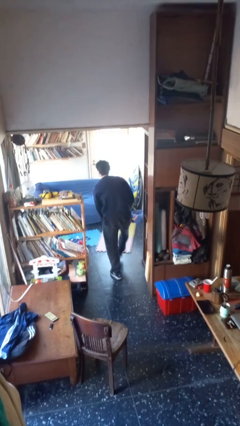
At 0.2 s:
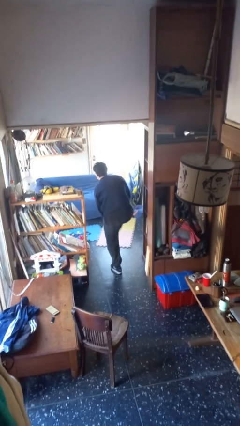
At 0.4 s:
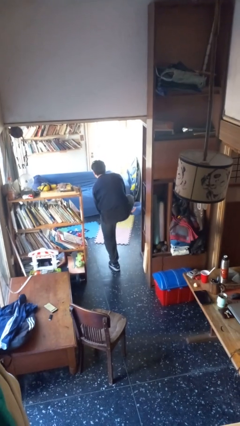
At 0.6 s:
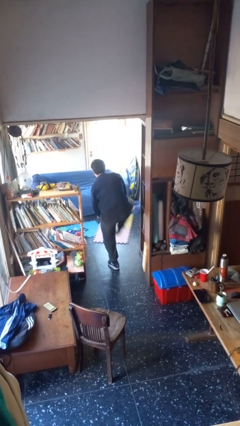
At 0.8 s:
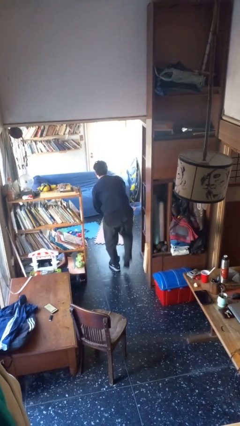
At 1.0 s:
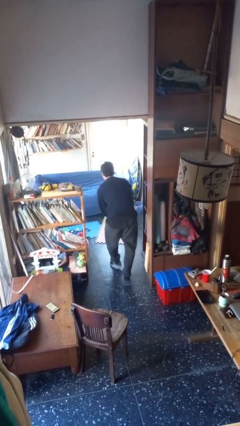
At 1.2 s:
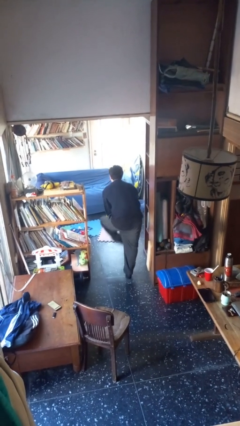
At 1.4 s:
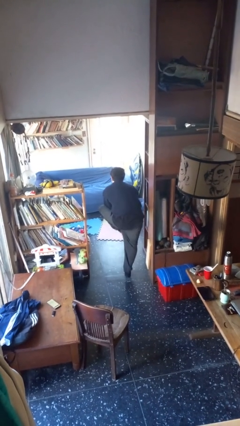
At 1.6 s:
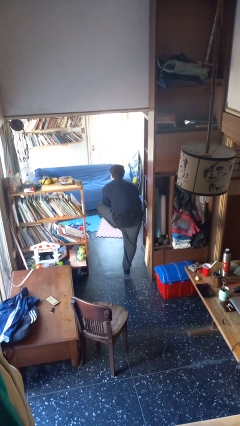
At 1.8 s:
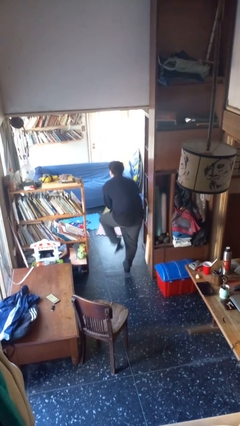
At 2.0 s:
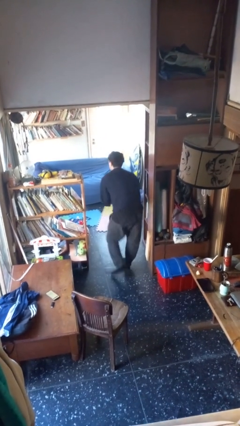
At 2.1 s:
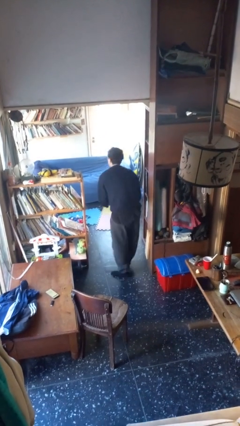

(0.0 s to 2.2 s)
person takes off shoes

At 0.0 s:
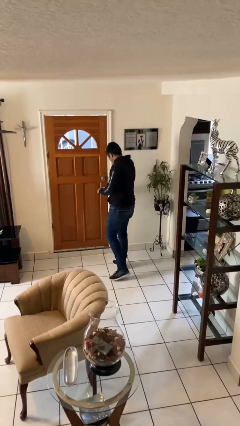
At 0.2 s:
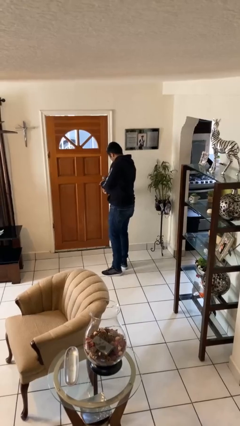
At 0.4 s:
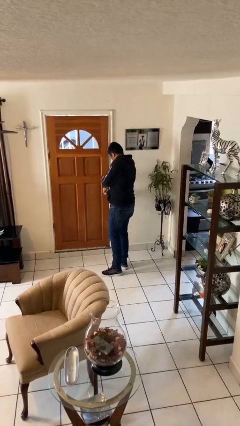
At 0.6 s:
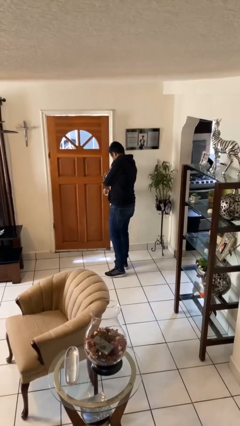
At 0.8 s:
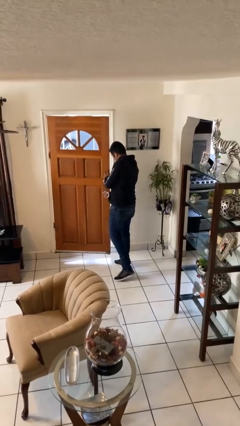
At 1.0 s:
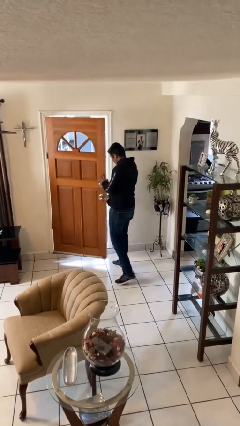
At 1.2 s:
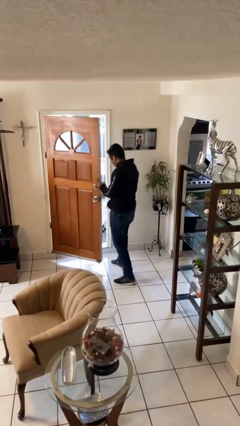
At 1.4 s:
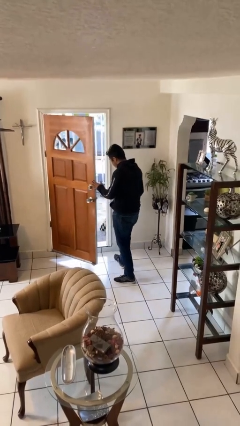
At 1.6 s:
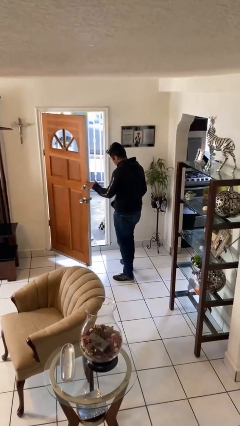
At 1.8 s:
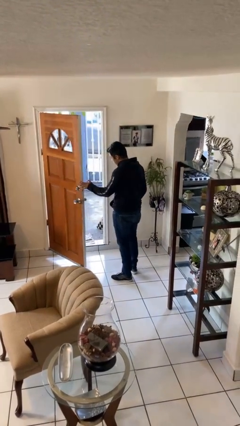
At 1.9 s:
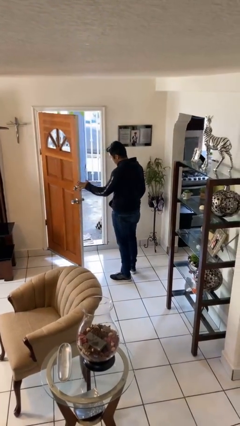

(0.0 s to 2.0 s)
person opens facility door

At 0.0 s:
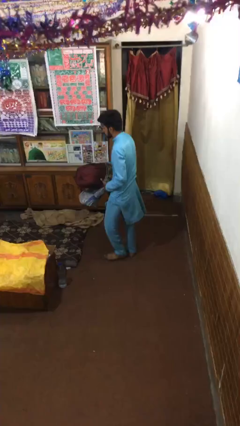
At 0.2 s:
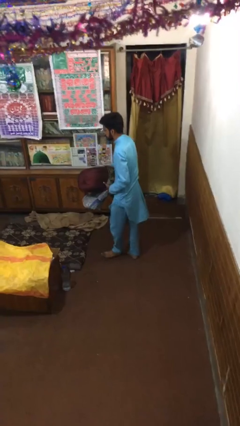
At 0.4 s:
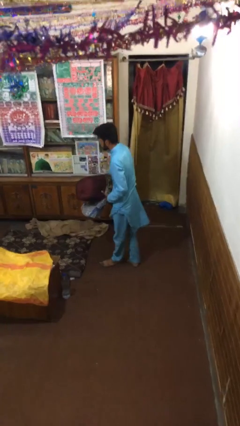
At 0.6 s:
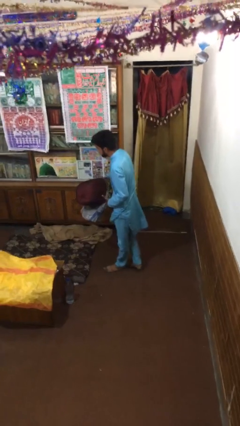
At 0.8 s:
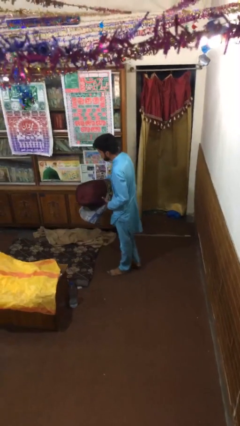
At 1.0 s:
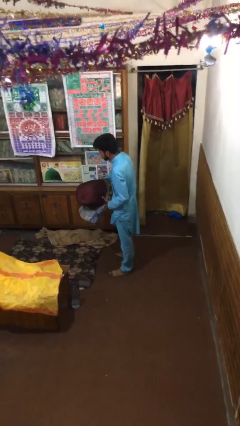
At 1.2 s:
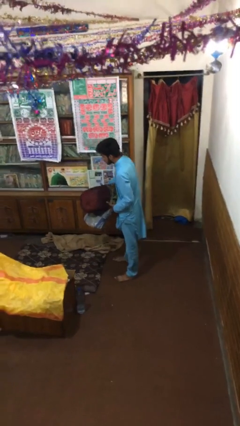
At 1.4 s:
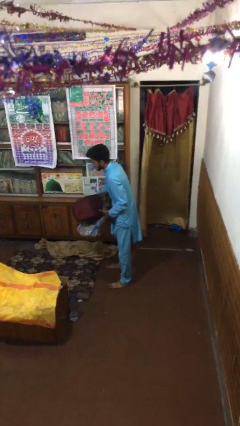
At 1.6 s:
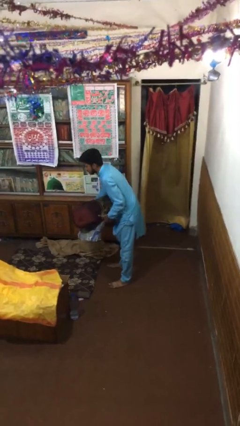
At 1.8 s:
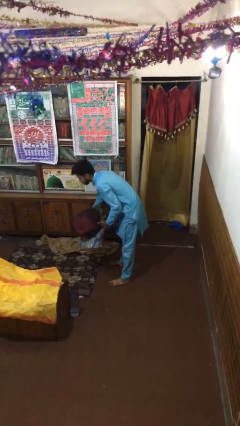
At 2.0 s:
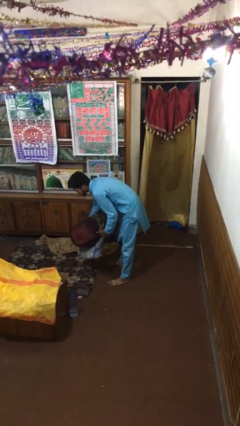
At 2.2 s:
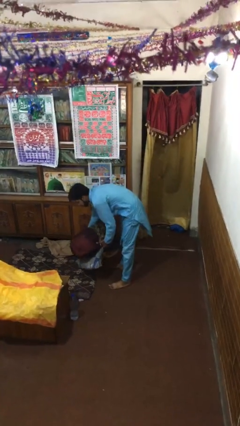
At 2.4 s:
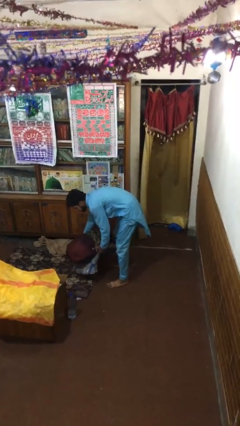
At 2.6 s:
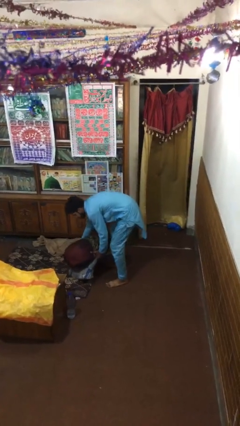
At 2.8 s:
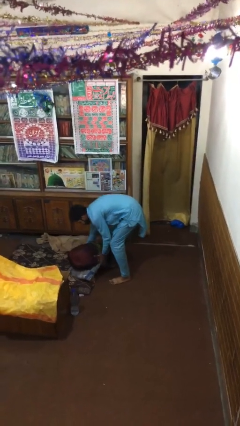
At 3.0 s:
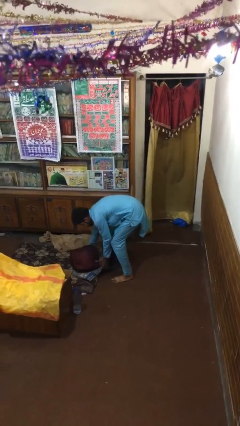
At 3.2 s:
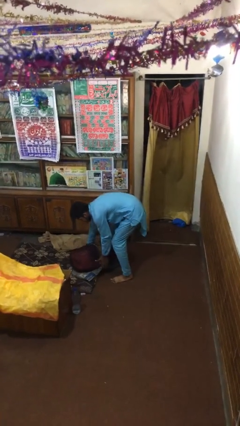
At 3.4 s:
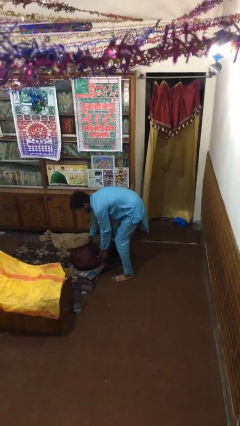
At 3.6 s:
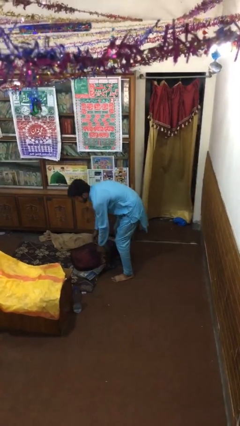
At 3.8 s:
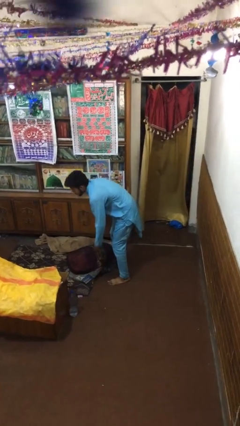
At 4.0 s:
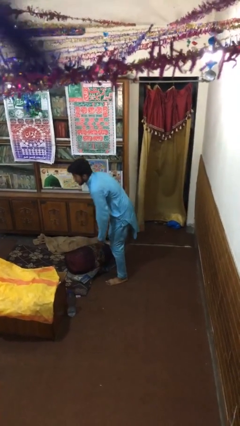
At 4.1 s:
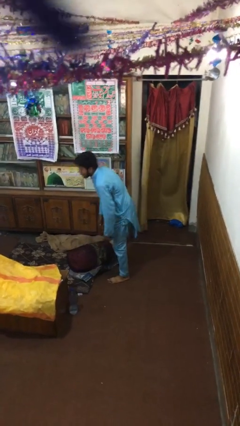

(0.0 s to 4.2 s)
person puts down object on floor

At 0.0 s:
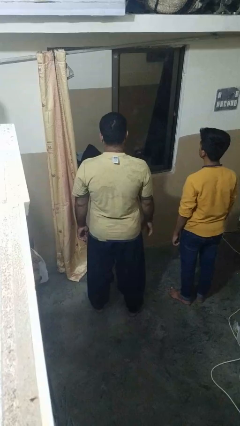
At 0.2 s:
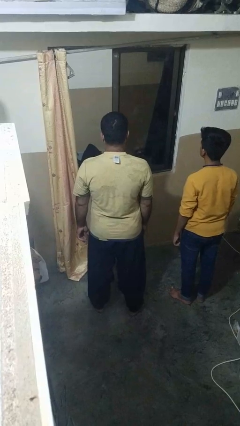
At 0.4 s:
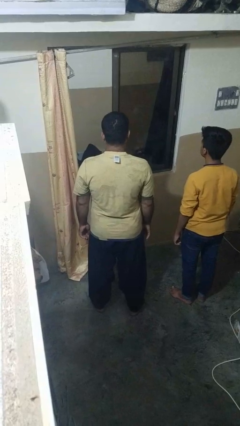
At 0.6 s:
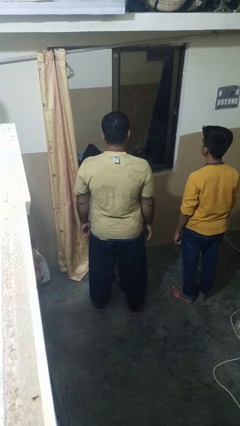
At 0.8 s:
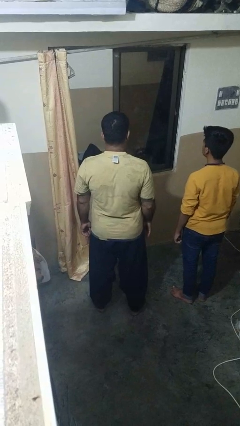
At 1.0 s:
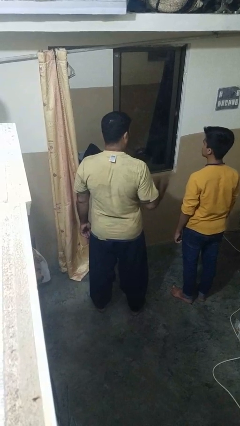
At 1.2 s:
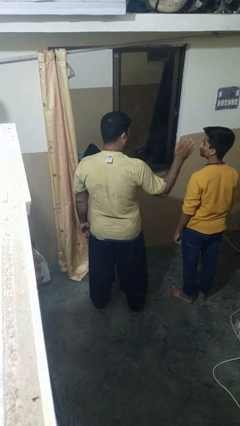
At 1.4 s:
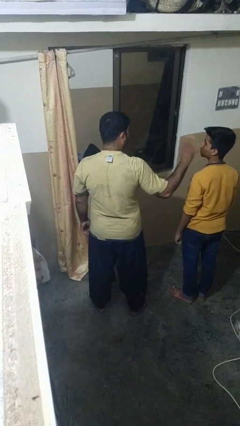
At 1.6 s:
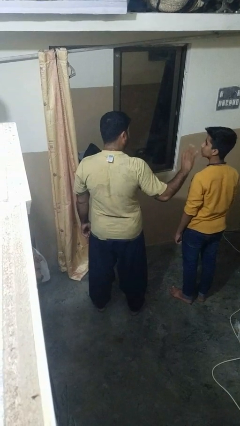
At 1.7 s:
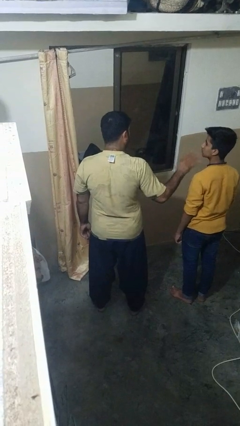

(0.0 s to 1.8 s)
person waves at person

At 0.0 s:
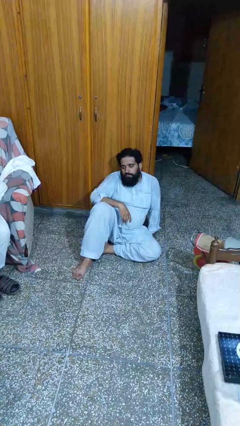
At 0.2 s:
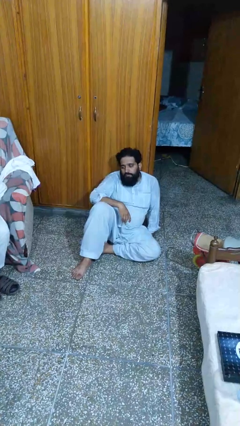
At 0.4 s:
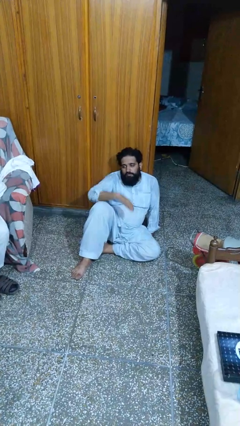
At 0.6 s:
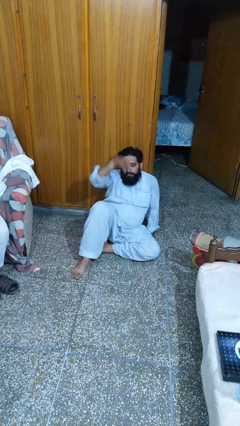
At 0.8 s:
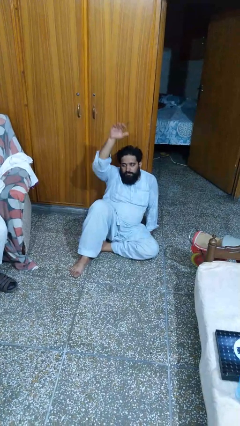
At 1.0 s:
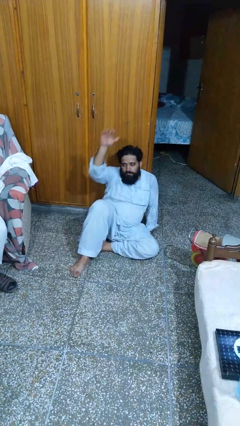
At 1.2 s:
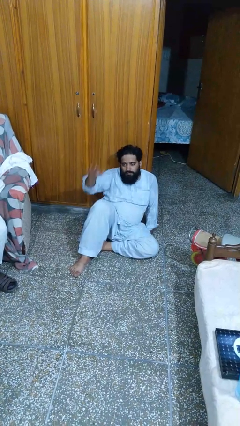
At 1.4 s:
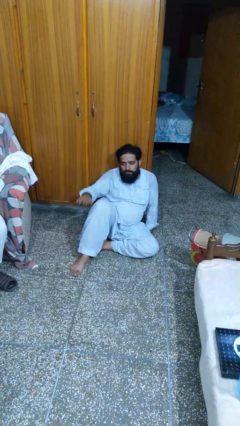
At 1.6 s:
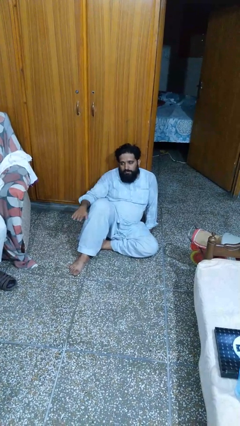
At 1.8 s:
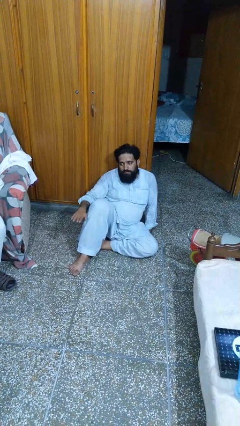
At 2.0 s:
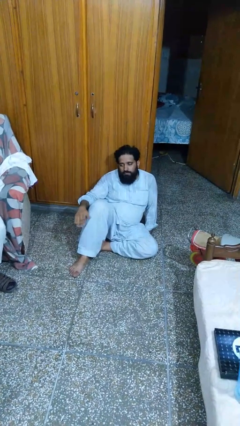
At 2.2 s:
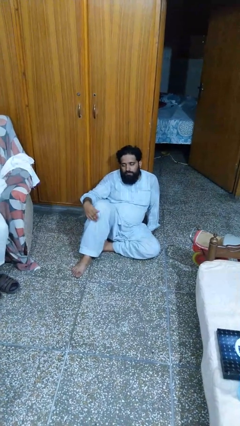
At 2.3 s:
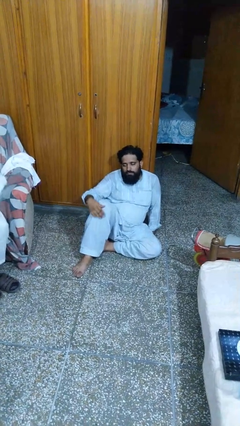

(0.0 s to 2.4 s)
person gestures swipe down

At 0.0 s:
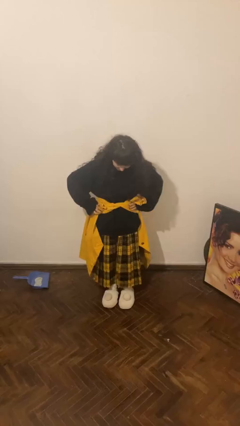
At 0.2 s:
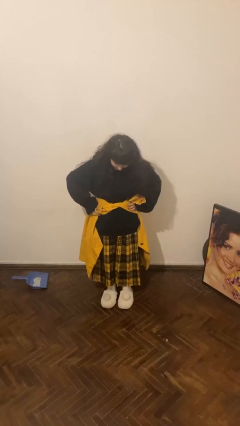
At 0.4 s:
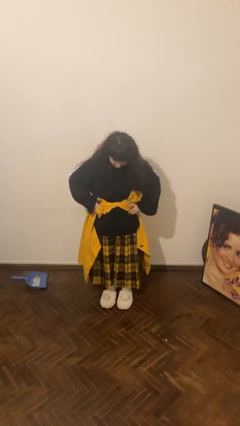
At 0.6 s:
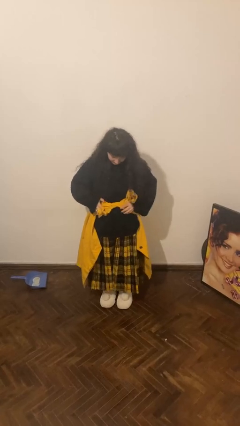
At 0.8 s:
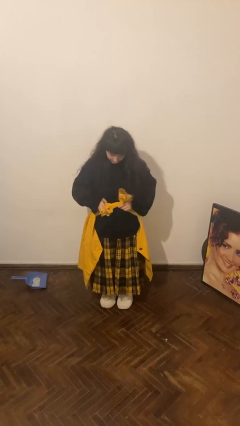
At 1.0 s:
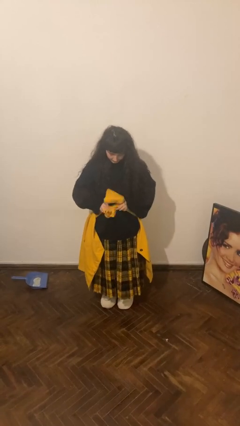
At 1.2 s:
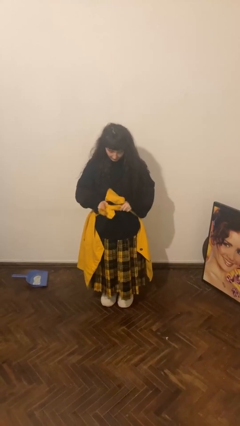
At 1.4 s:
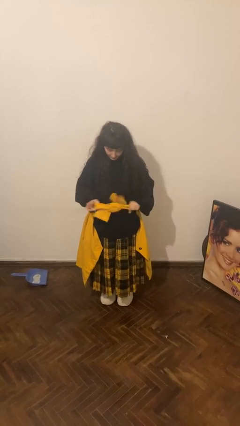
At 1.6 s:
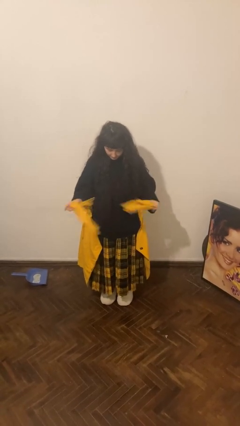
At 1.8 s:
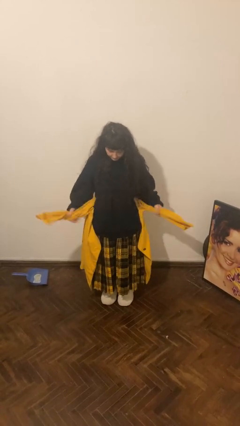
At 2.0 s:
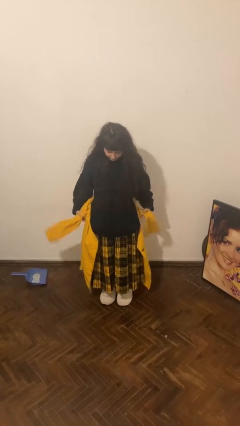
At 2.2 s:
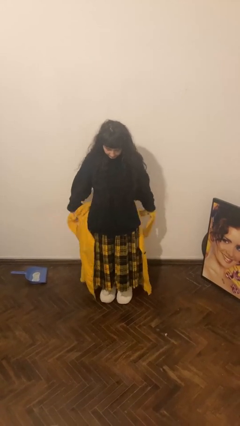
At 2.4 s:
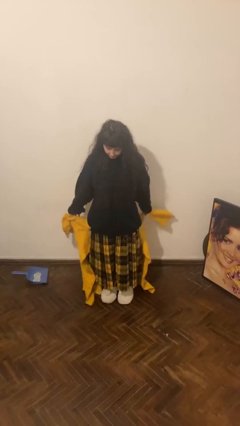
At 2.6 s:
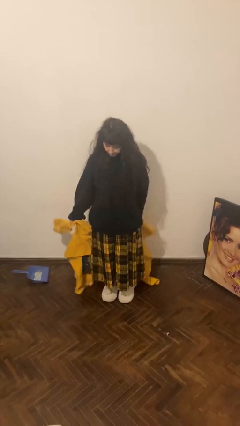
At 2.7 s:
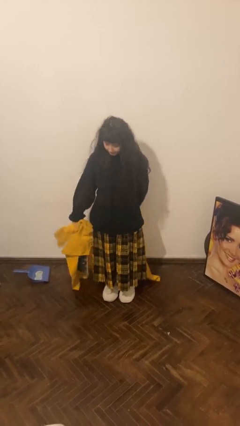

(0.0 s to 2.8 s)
person unties jacket around waist

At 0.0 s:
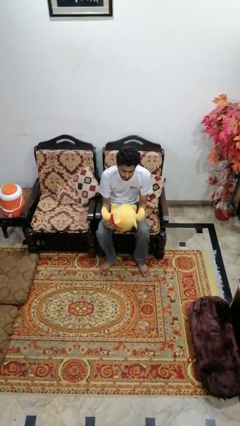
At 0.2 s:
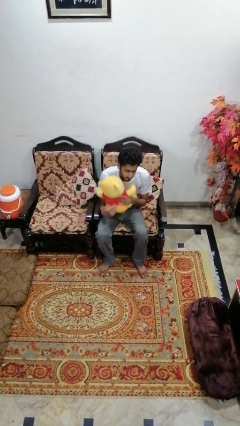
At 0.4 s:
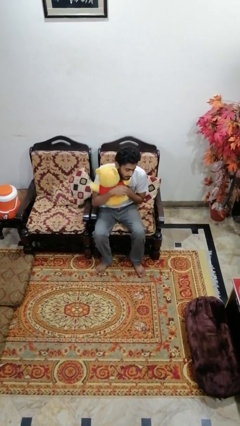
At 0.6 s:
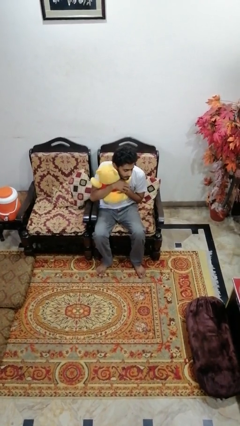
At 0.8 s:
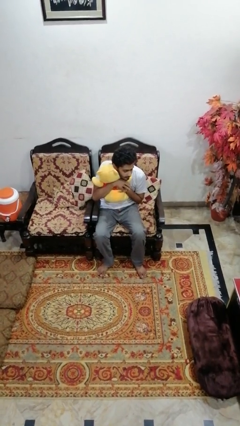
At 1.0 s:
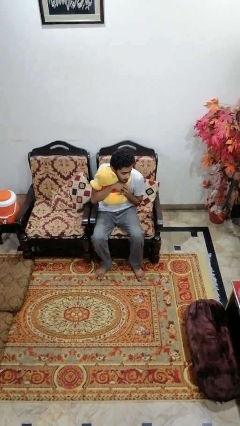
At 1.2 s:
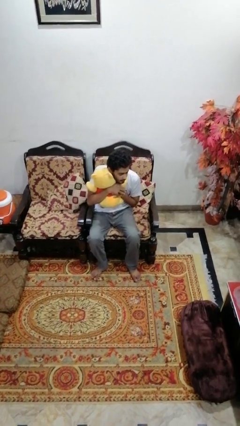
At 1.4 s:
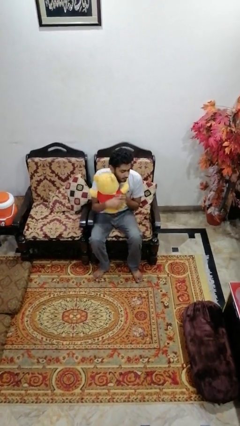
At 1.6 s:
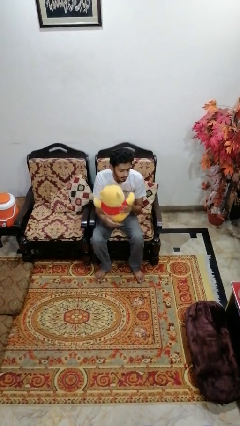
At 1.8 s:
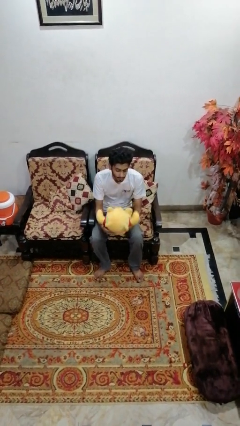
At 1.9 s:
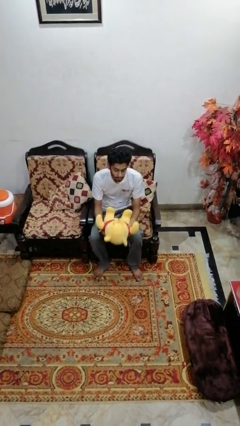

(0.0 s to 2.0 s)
person hugs stuffed animal
